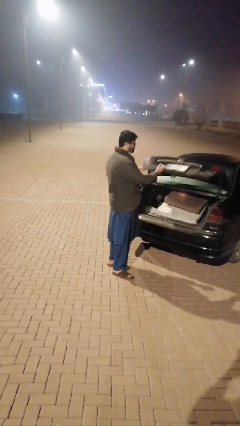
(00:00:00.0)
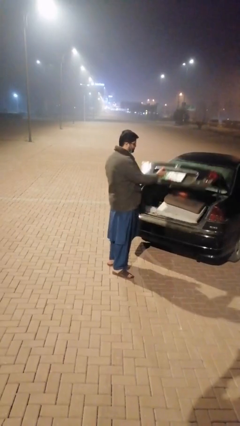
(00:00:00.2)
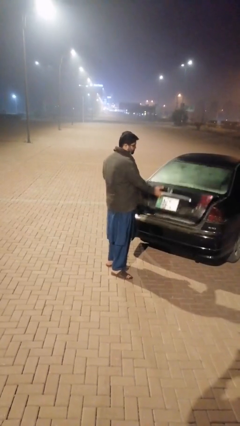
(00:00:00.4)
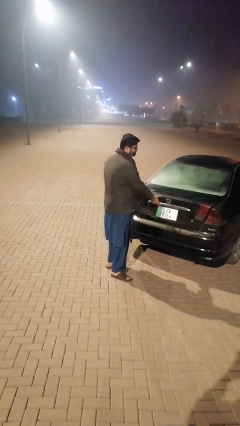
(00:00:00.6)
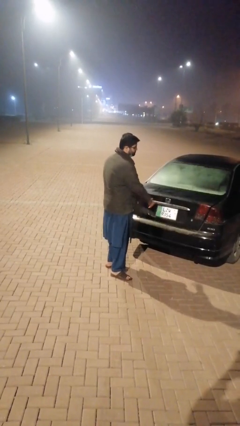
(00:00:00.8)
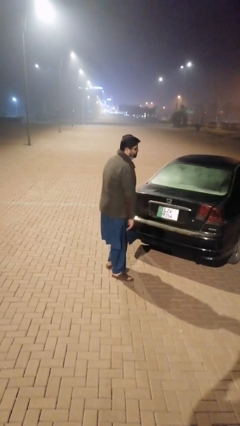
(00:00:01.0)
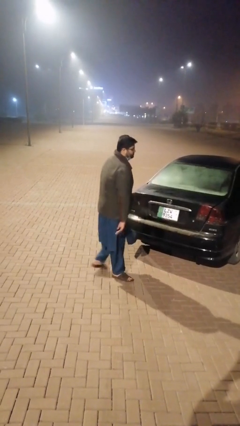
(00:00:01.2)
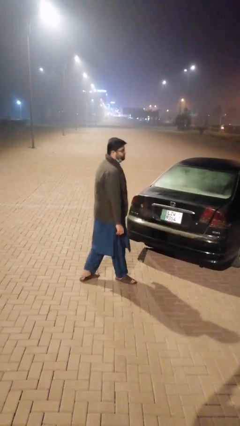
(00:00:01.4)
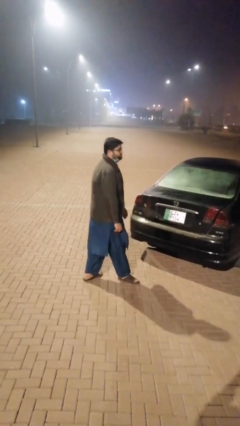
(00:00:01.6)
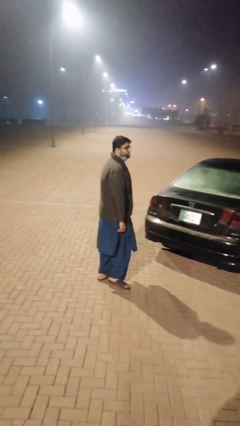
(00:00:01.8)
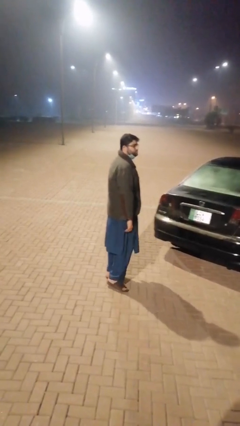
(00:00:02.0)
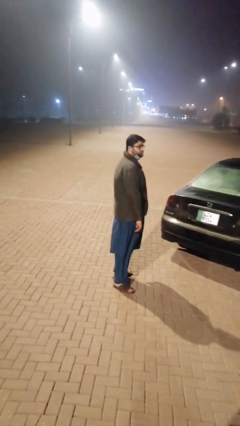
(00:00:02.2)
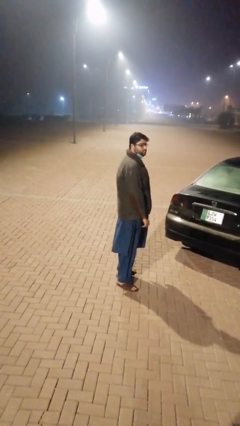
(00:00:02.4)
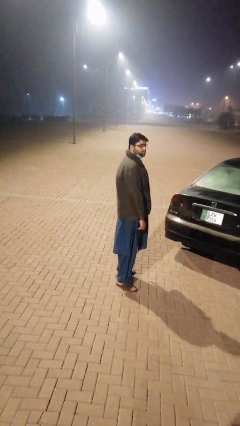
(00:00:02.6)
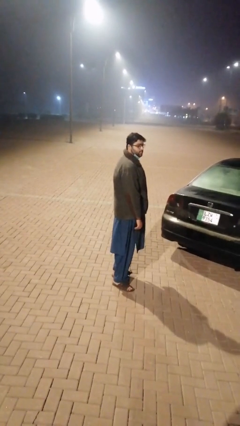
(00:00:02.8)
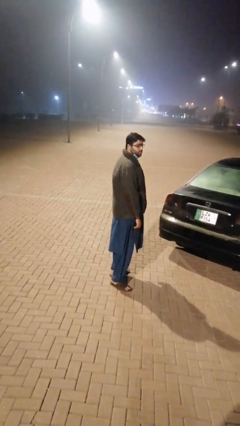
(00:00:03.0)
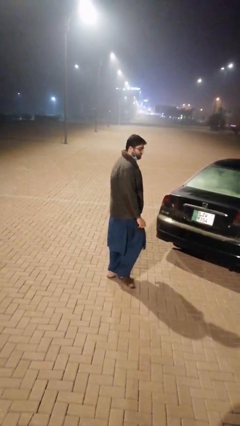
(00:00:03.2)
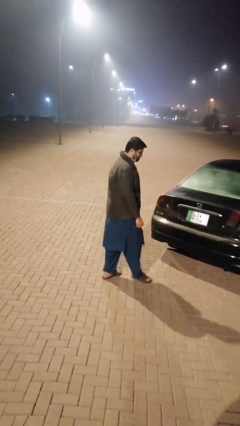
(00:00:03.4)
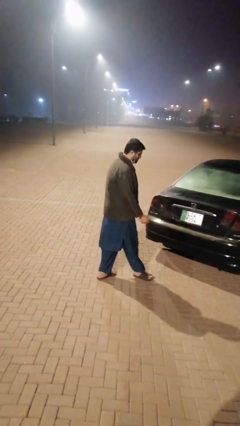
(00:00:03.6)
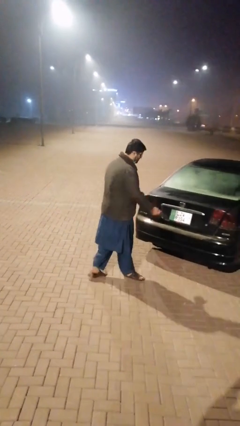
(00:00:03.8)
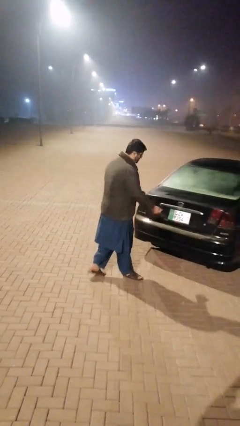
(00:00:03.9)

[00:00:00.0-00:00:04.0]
person closes car trunk

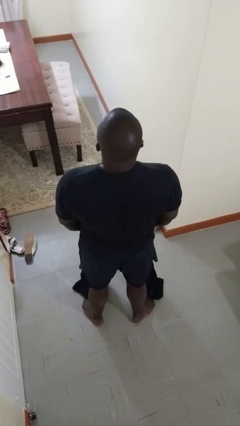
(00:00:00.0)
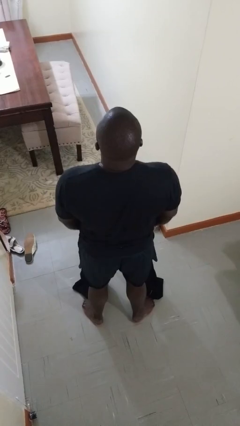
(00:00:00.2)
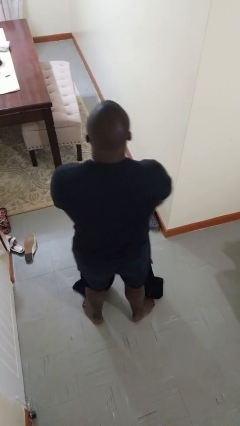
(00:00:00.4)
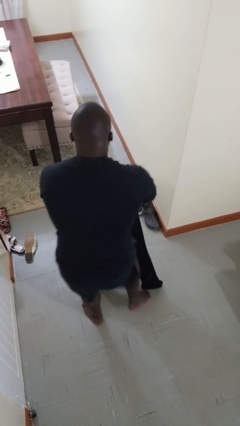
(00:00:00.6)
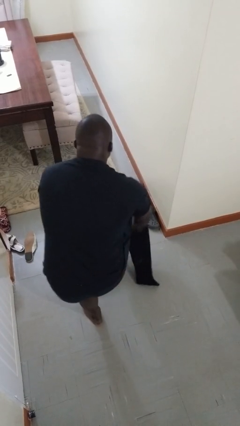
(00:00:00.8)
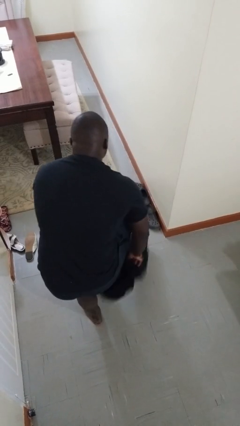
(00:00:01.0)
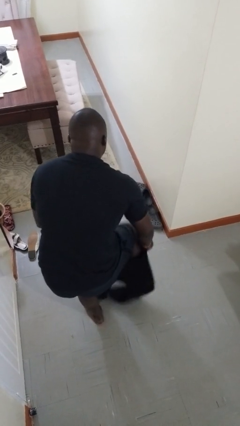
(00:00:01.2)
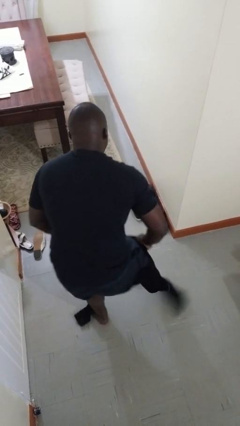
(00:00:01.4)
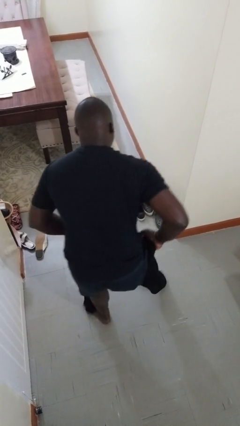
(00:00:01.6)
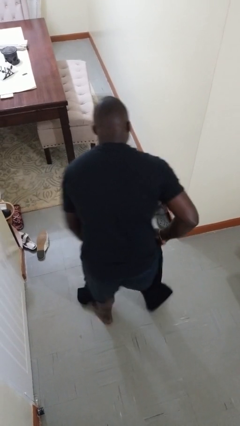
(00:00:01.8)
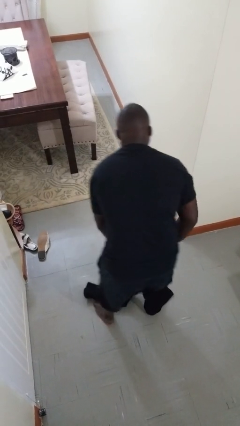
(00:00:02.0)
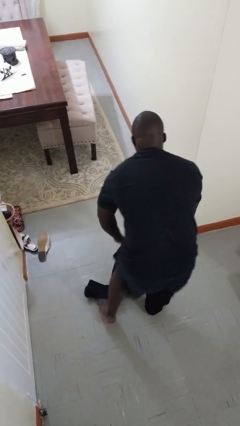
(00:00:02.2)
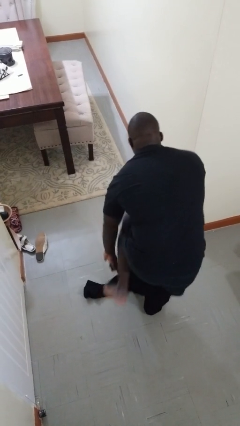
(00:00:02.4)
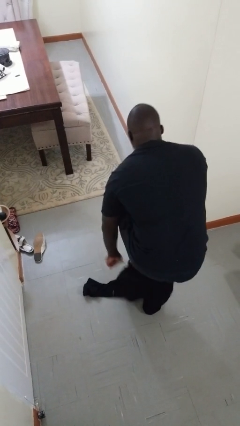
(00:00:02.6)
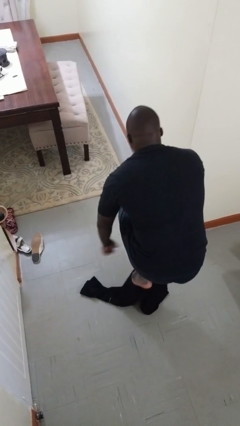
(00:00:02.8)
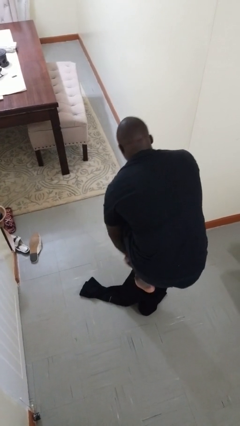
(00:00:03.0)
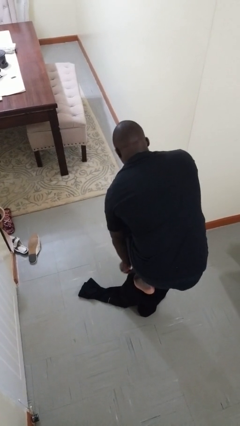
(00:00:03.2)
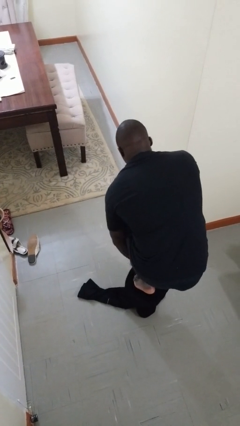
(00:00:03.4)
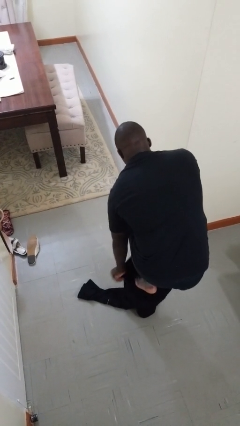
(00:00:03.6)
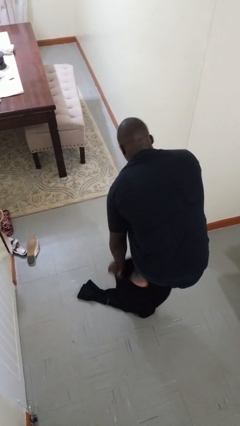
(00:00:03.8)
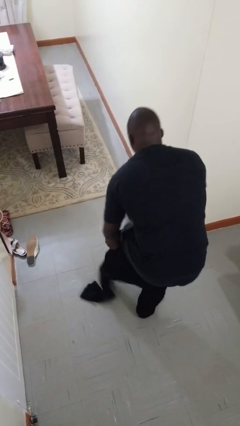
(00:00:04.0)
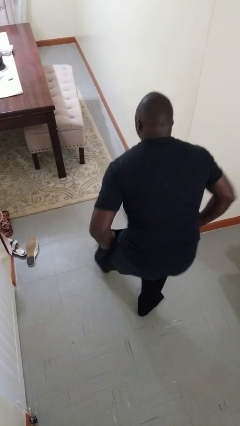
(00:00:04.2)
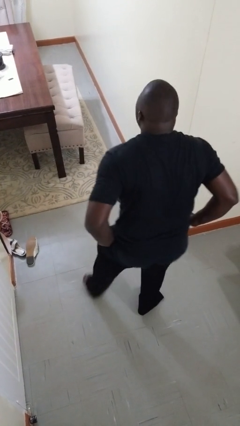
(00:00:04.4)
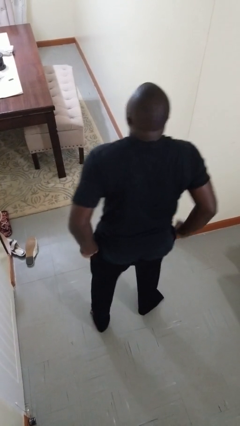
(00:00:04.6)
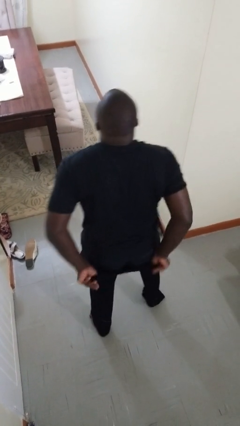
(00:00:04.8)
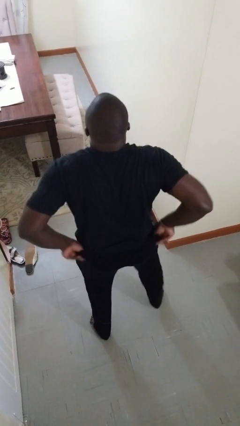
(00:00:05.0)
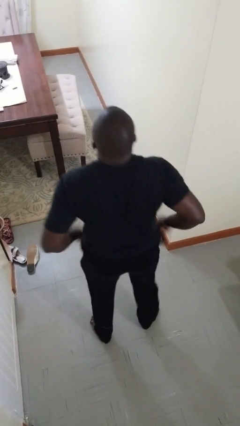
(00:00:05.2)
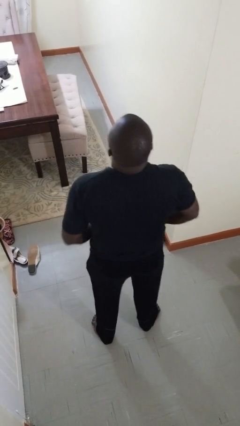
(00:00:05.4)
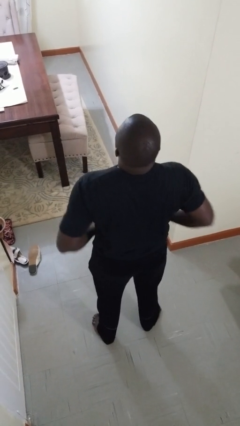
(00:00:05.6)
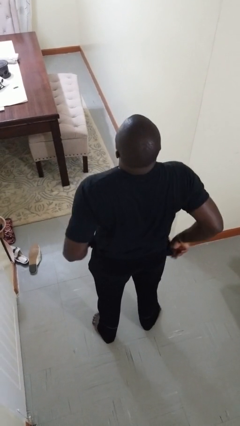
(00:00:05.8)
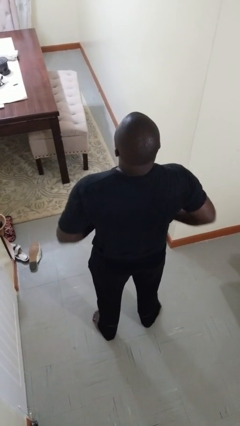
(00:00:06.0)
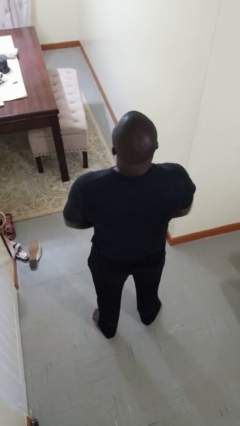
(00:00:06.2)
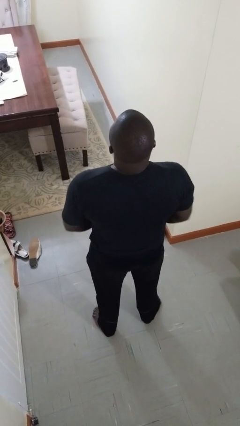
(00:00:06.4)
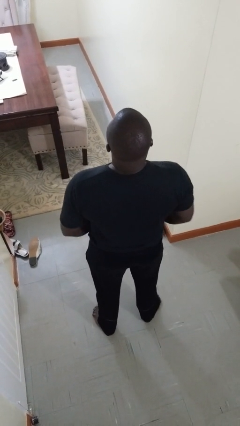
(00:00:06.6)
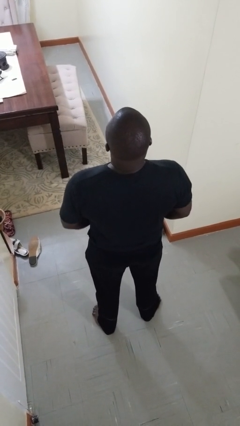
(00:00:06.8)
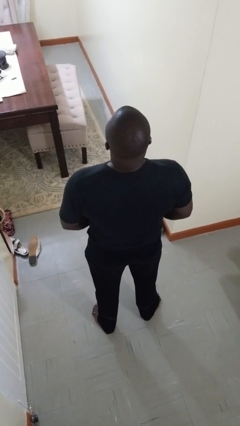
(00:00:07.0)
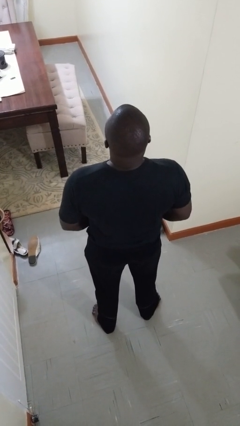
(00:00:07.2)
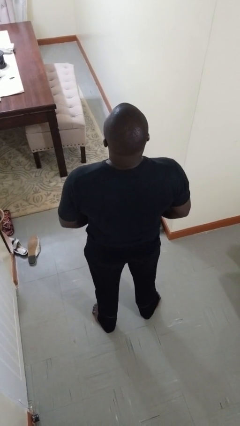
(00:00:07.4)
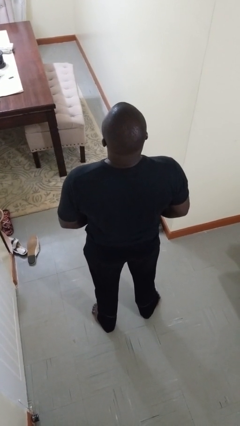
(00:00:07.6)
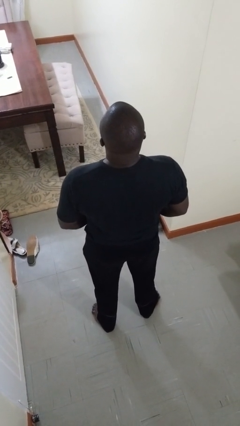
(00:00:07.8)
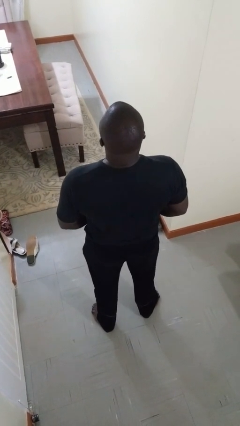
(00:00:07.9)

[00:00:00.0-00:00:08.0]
person takes off pants

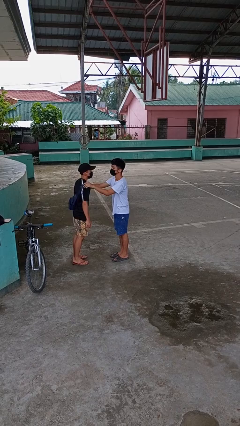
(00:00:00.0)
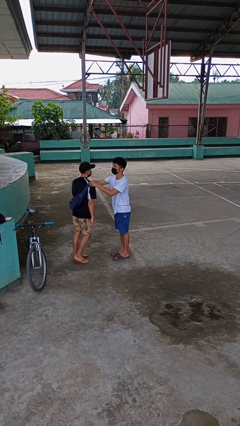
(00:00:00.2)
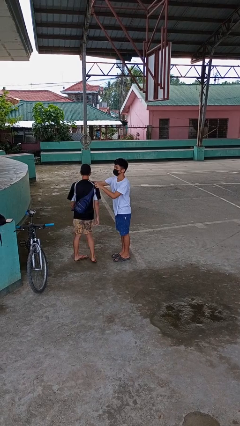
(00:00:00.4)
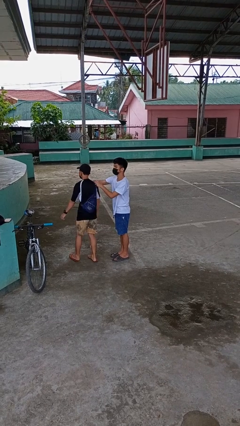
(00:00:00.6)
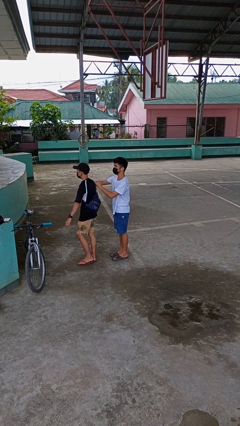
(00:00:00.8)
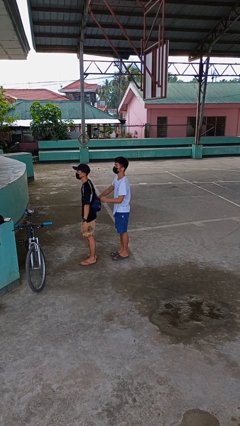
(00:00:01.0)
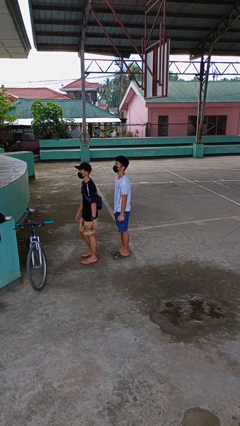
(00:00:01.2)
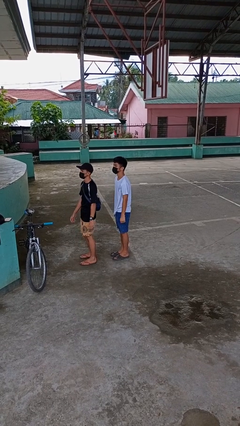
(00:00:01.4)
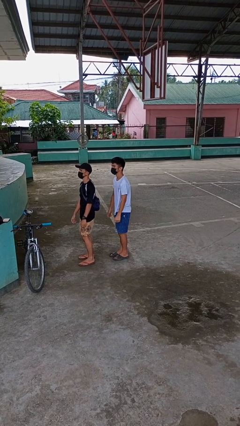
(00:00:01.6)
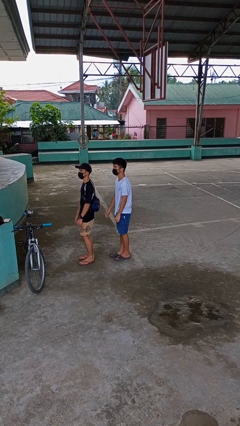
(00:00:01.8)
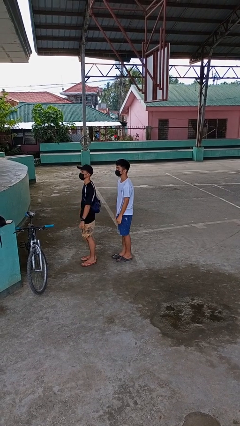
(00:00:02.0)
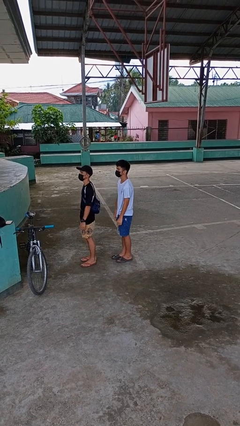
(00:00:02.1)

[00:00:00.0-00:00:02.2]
person spins person around

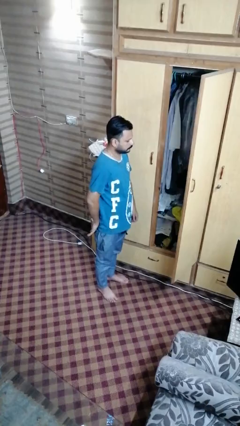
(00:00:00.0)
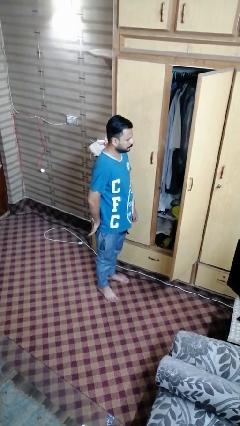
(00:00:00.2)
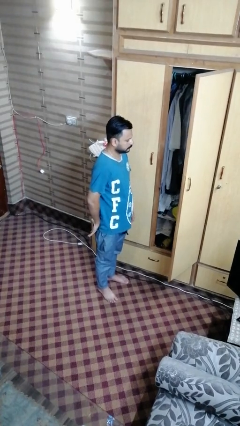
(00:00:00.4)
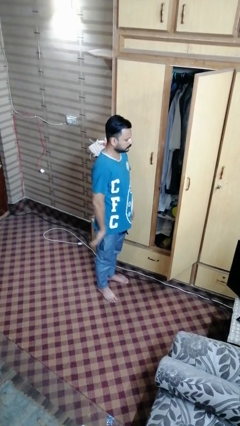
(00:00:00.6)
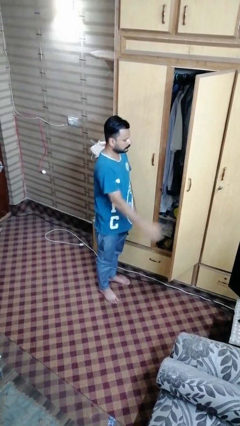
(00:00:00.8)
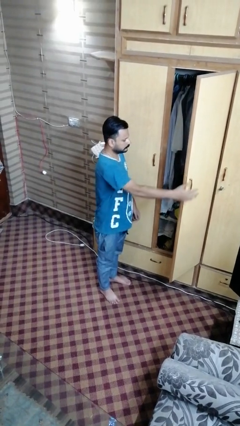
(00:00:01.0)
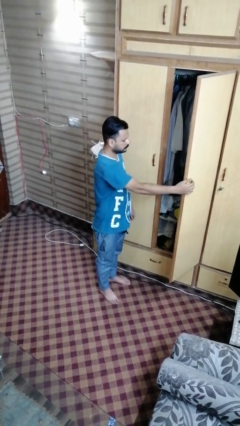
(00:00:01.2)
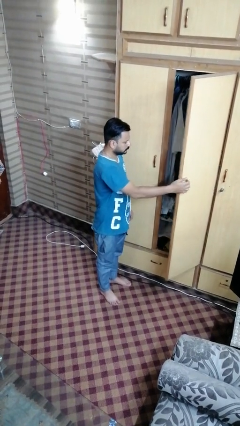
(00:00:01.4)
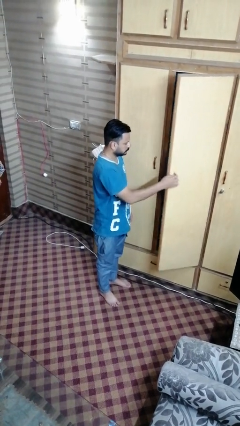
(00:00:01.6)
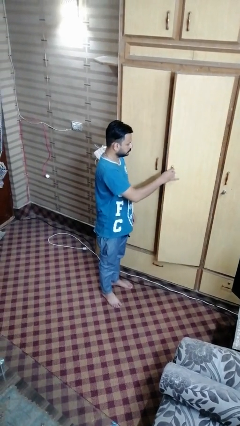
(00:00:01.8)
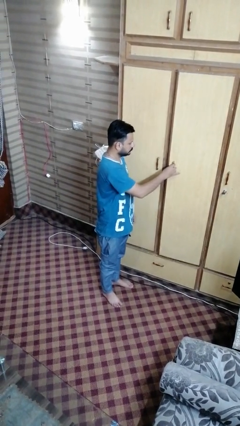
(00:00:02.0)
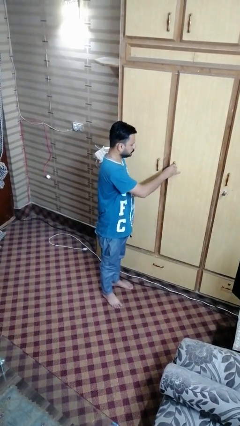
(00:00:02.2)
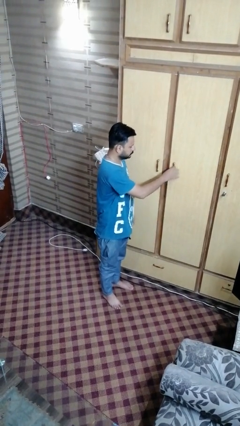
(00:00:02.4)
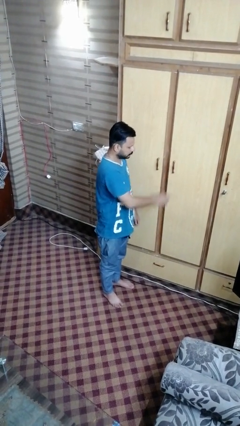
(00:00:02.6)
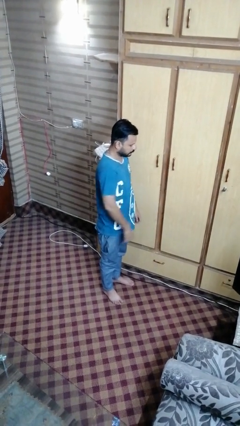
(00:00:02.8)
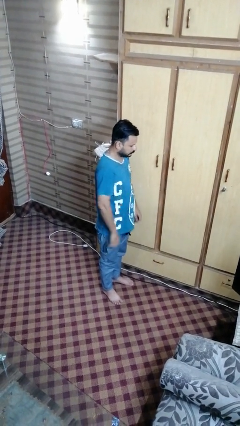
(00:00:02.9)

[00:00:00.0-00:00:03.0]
person closes closet door
